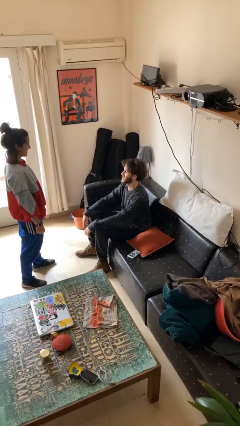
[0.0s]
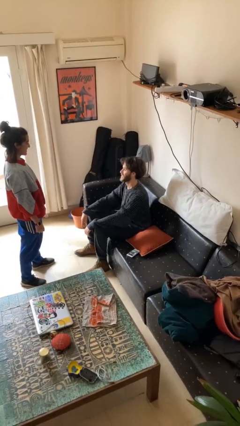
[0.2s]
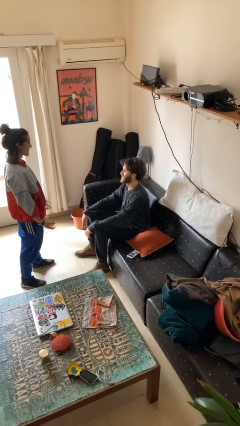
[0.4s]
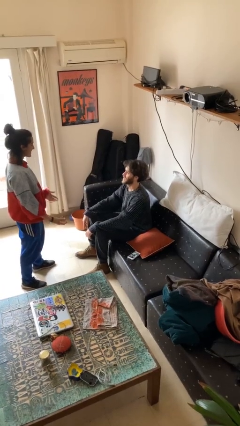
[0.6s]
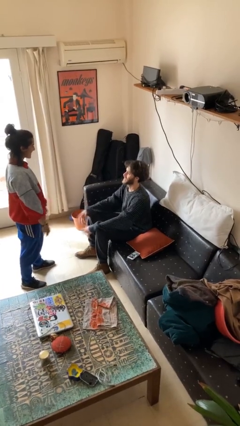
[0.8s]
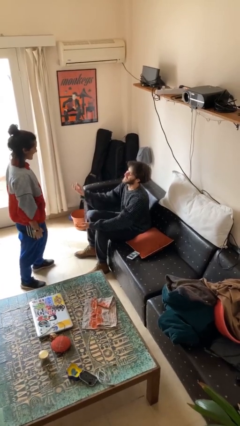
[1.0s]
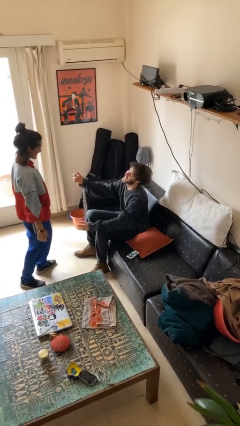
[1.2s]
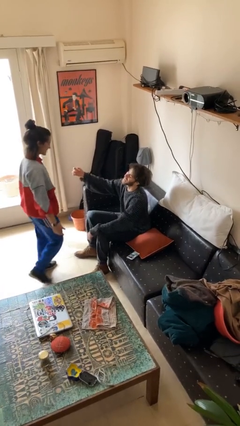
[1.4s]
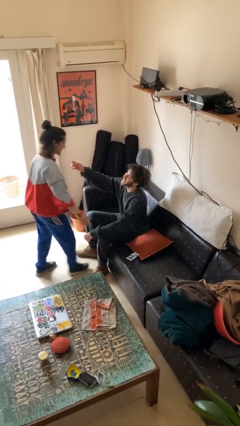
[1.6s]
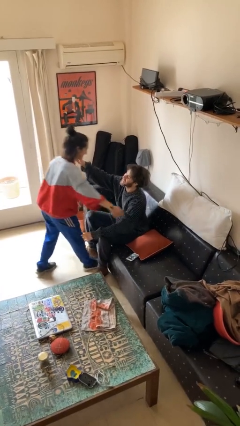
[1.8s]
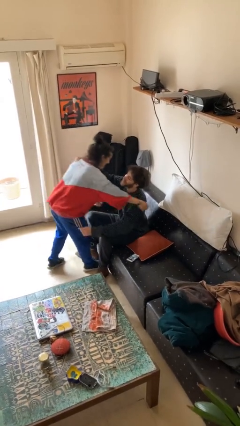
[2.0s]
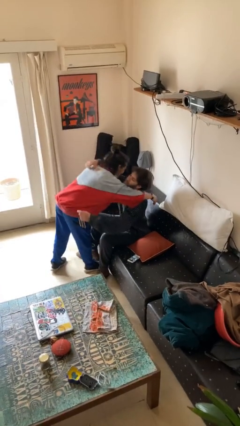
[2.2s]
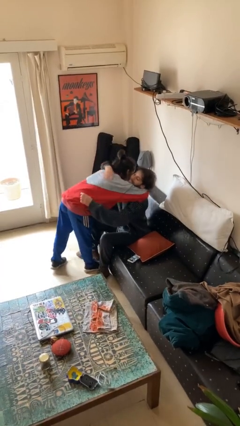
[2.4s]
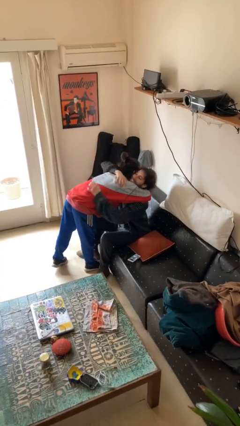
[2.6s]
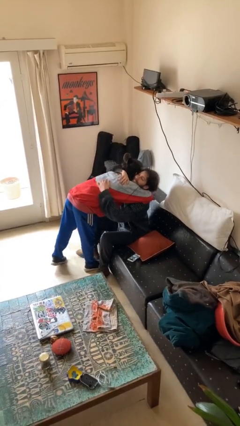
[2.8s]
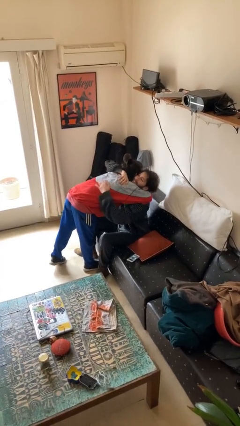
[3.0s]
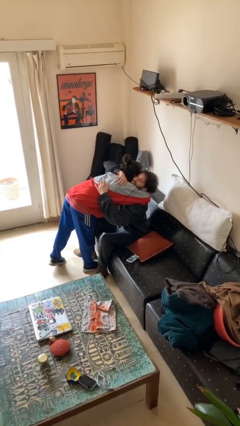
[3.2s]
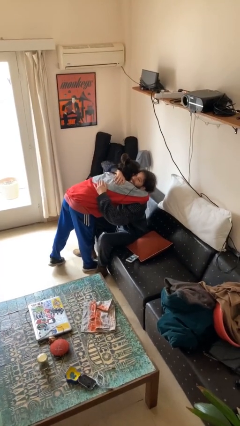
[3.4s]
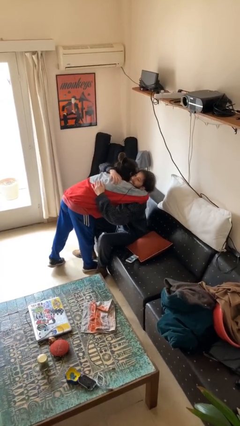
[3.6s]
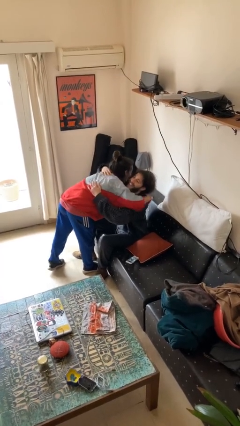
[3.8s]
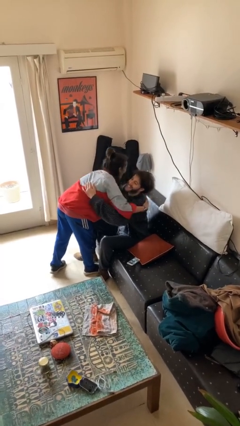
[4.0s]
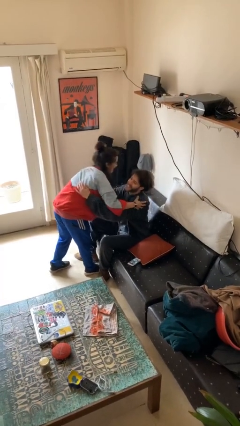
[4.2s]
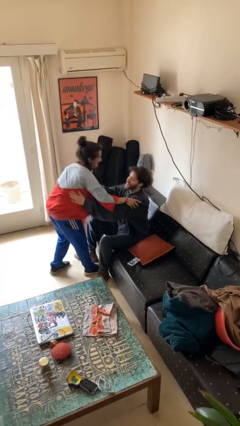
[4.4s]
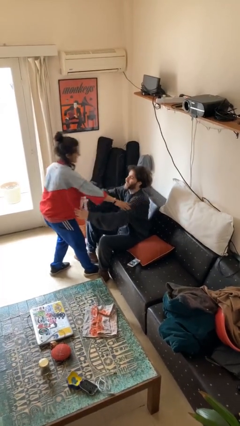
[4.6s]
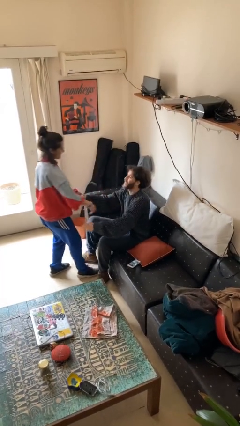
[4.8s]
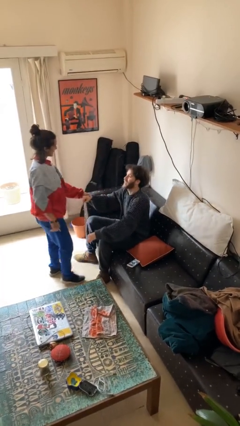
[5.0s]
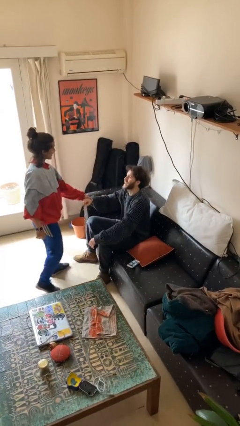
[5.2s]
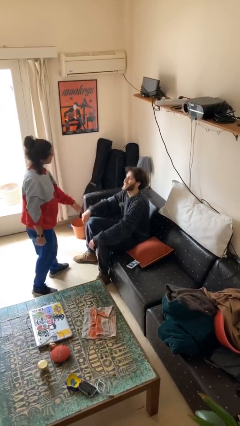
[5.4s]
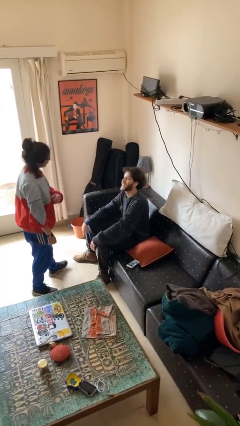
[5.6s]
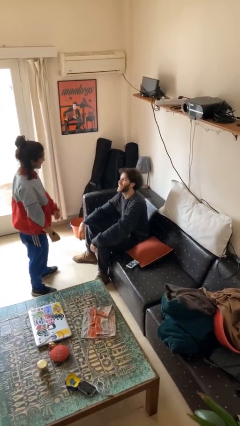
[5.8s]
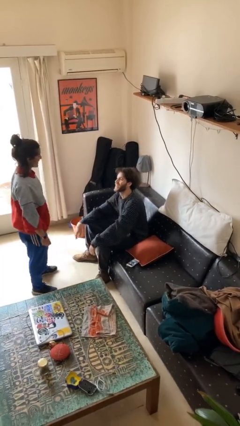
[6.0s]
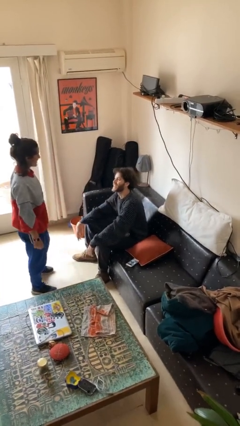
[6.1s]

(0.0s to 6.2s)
person embraces person

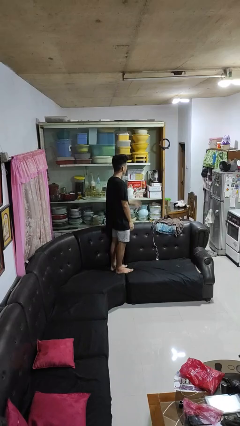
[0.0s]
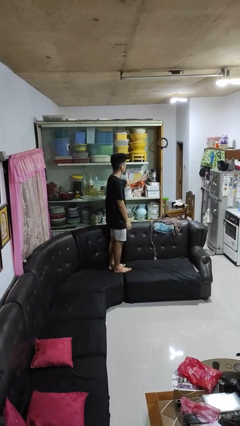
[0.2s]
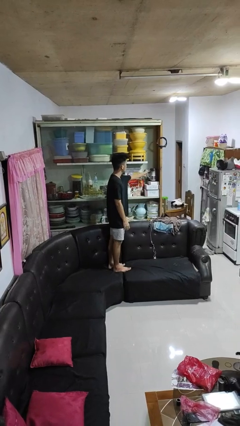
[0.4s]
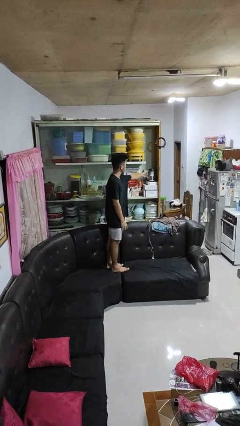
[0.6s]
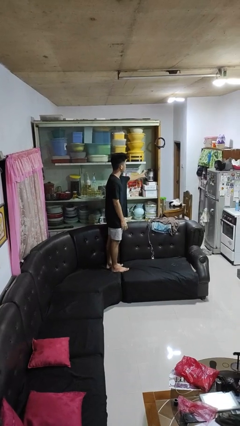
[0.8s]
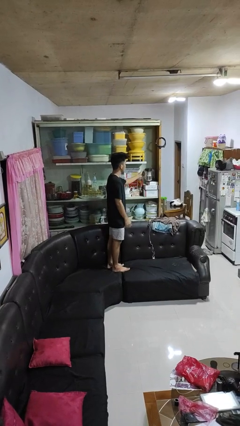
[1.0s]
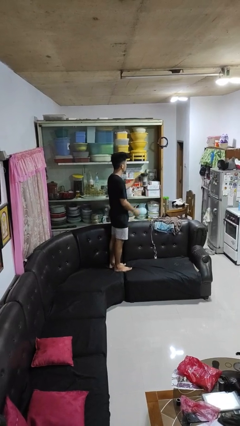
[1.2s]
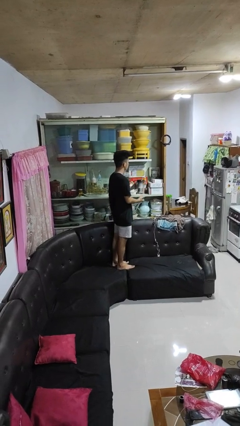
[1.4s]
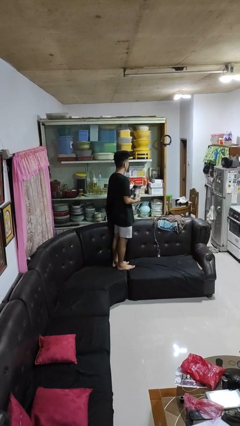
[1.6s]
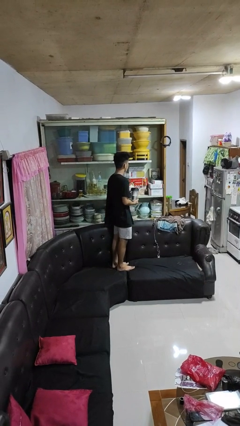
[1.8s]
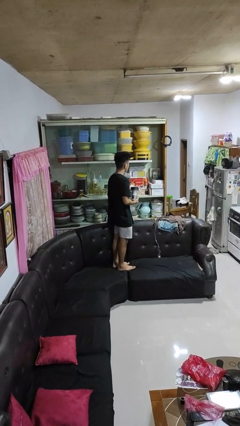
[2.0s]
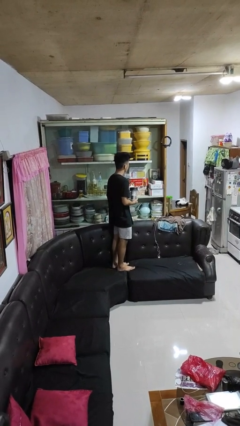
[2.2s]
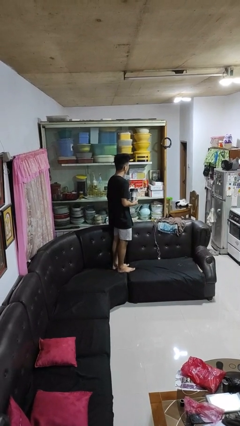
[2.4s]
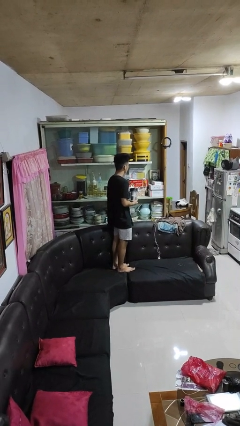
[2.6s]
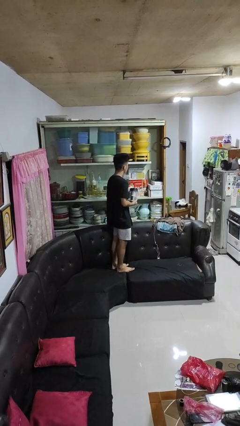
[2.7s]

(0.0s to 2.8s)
person picks up object from cabinet

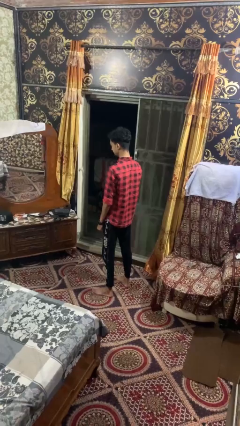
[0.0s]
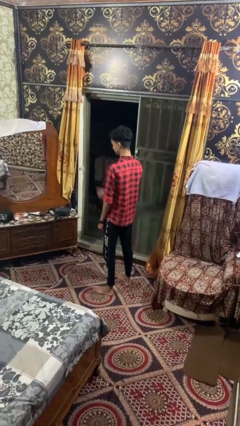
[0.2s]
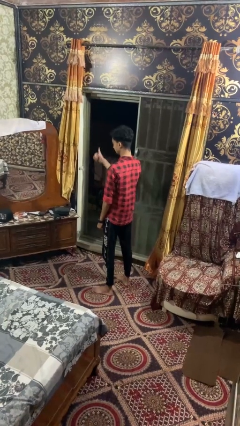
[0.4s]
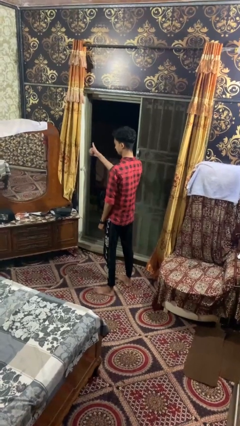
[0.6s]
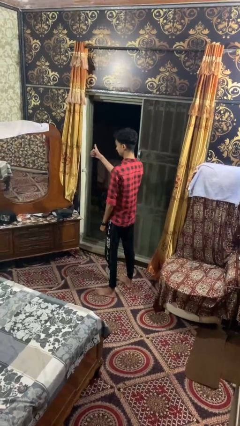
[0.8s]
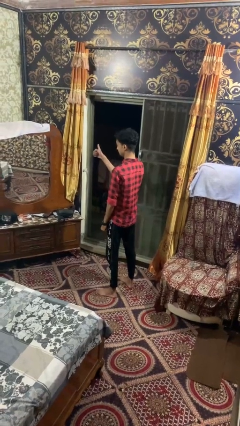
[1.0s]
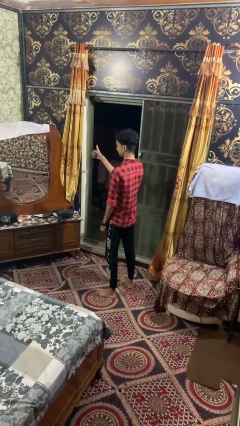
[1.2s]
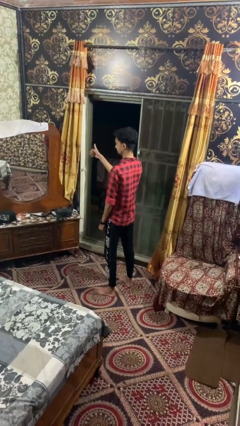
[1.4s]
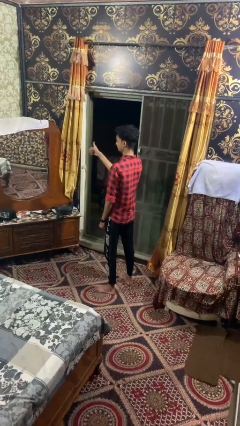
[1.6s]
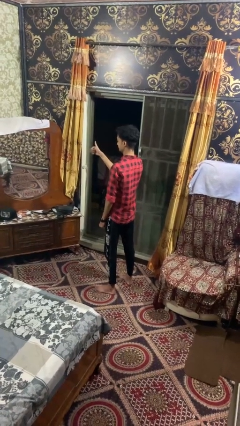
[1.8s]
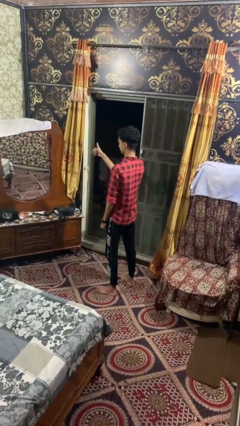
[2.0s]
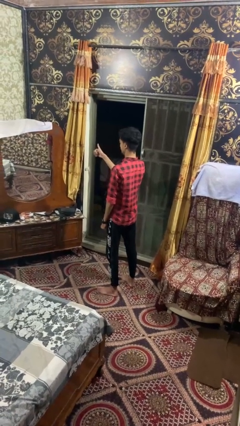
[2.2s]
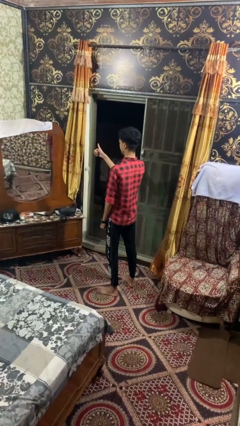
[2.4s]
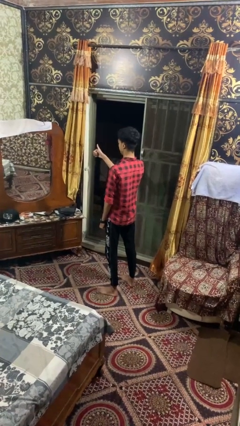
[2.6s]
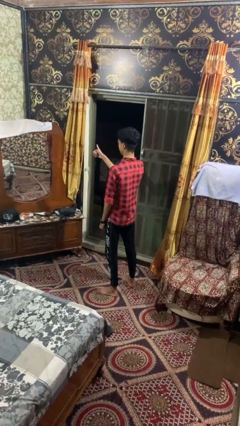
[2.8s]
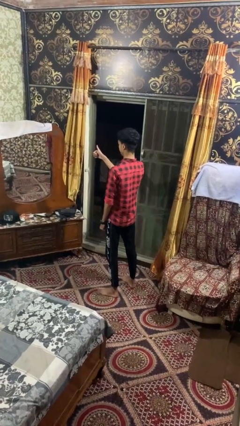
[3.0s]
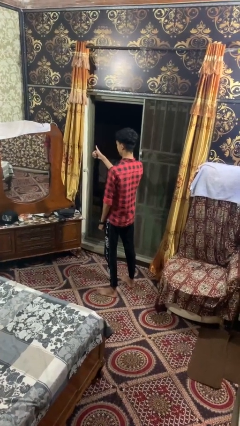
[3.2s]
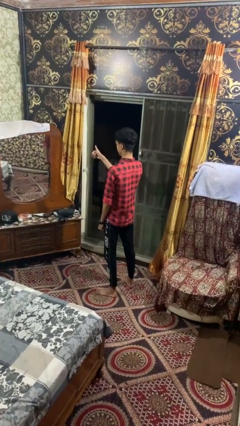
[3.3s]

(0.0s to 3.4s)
person gestures thumbs up

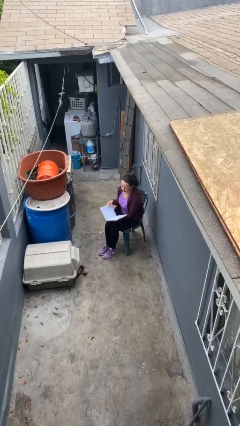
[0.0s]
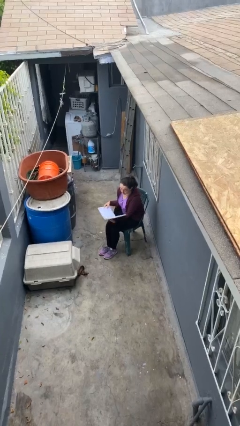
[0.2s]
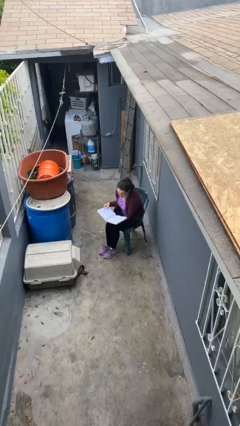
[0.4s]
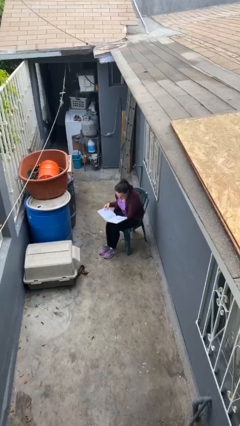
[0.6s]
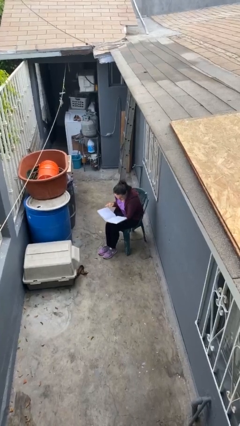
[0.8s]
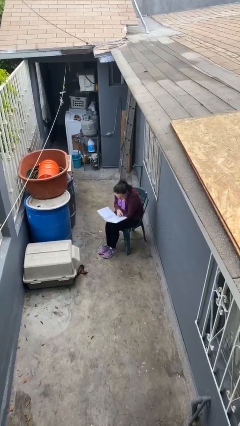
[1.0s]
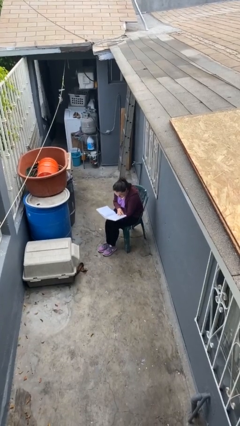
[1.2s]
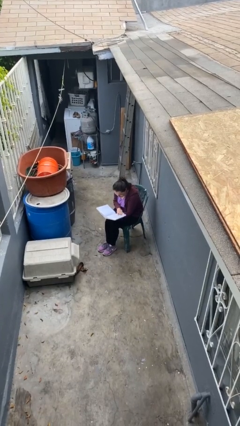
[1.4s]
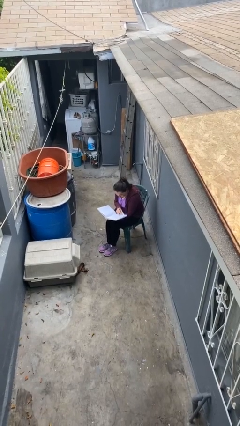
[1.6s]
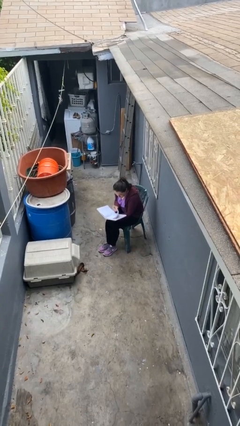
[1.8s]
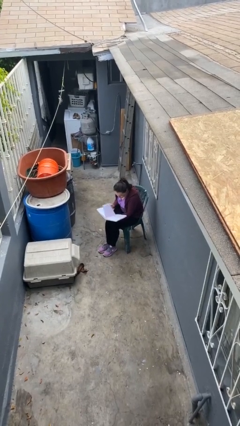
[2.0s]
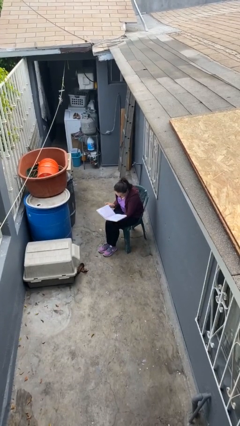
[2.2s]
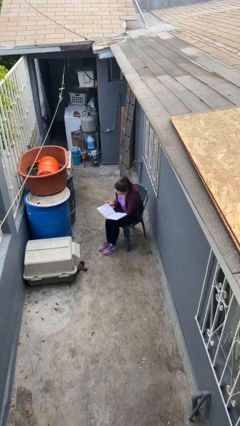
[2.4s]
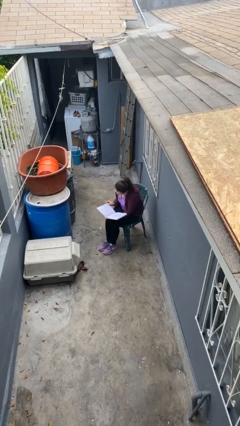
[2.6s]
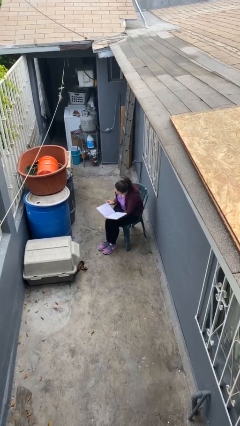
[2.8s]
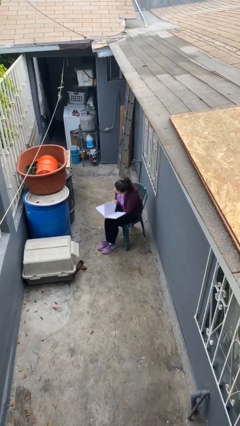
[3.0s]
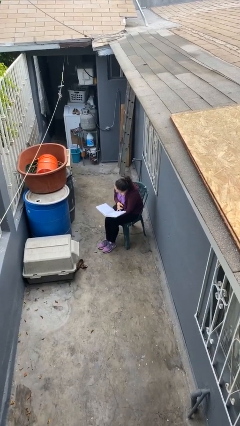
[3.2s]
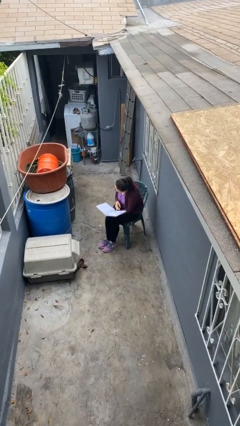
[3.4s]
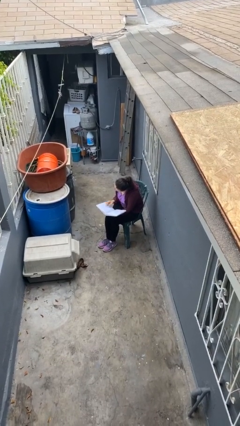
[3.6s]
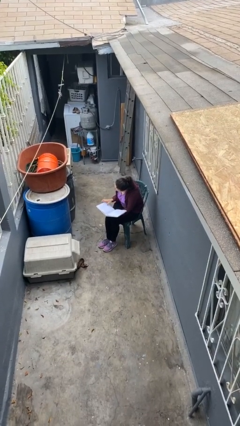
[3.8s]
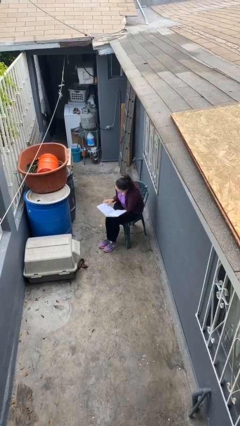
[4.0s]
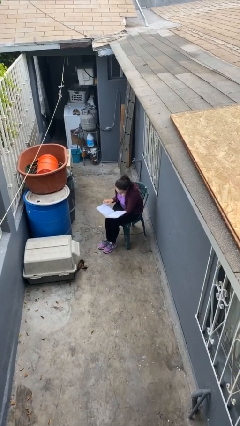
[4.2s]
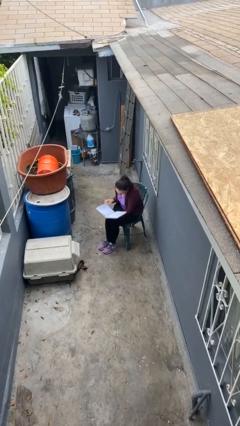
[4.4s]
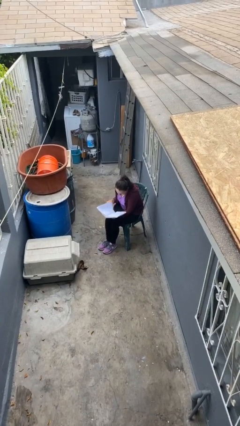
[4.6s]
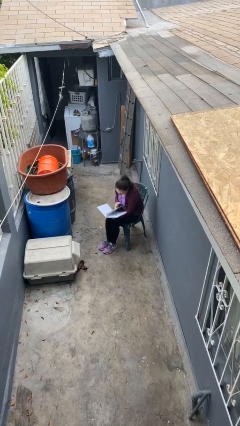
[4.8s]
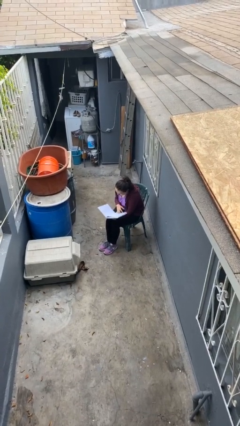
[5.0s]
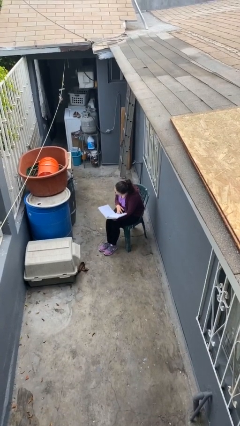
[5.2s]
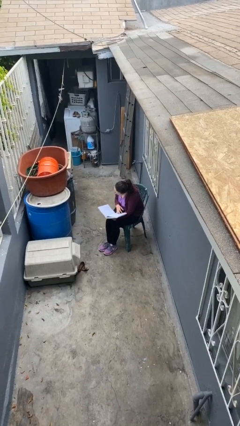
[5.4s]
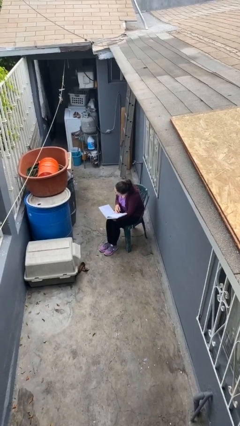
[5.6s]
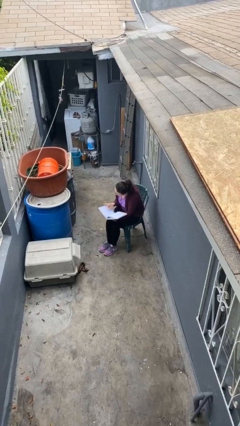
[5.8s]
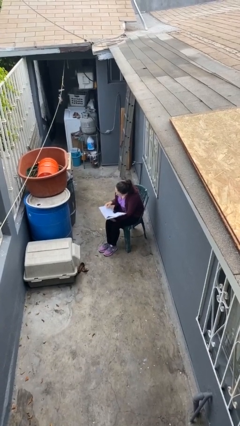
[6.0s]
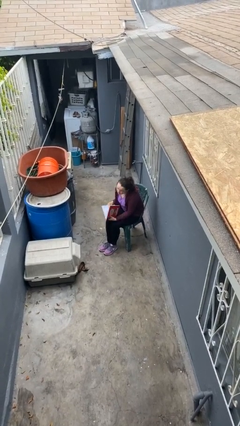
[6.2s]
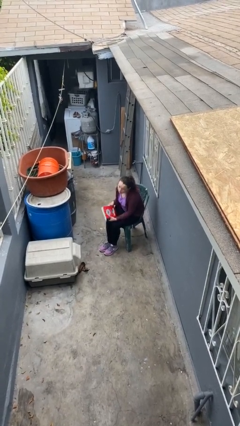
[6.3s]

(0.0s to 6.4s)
person reads document
